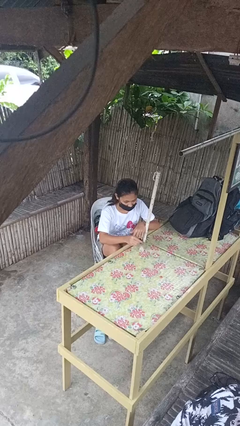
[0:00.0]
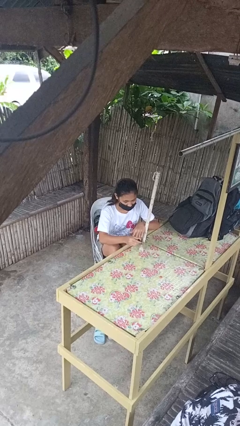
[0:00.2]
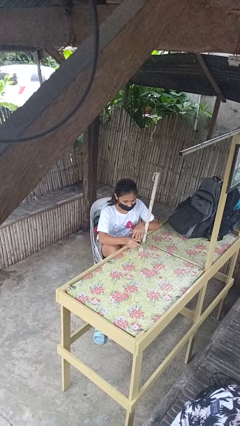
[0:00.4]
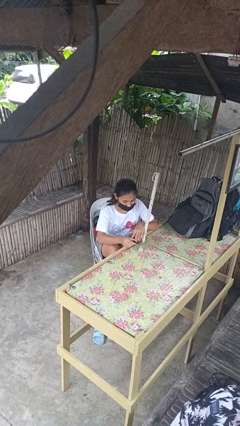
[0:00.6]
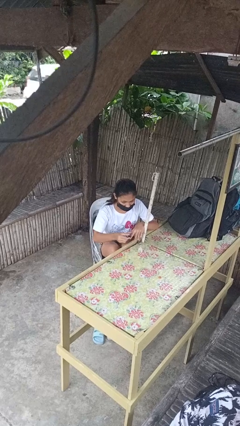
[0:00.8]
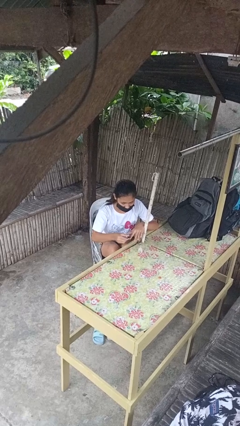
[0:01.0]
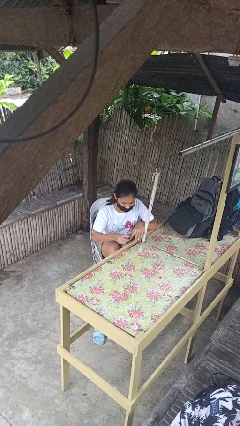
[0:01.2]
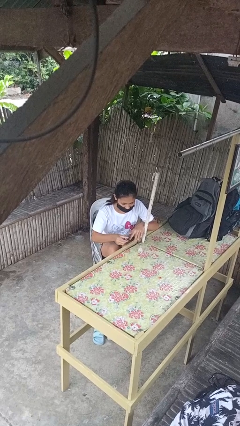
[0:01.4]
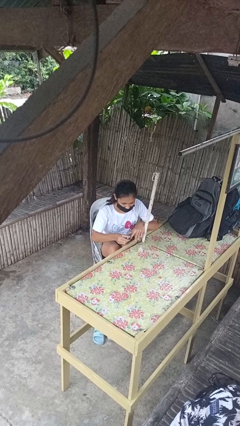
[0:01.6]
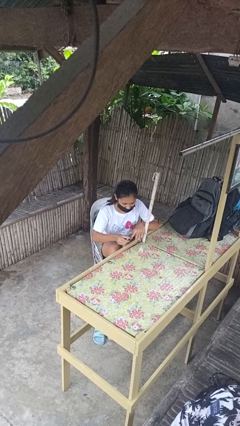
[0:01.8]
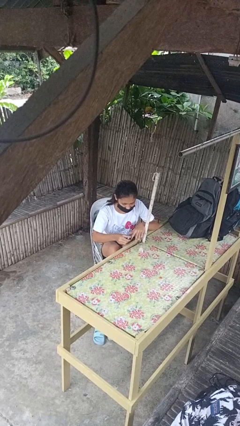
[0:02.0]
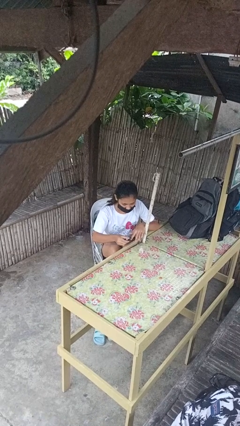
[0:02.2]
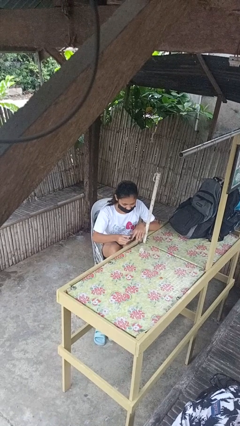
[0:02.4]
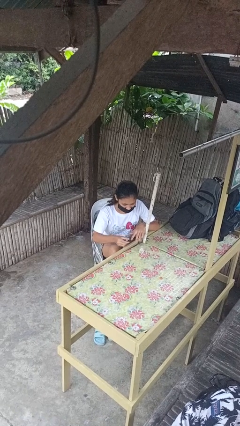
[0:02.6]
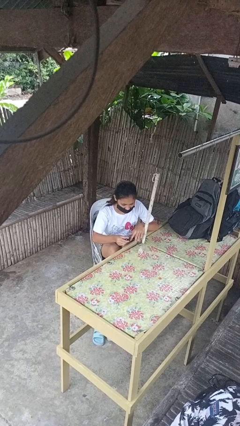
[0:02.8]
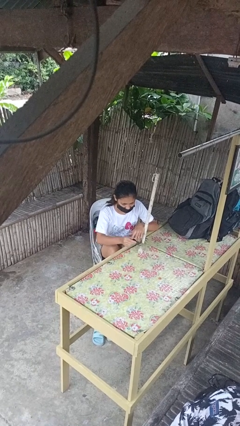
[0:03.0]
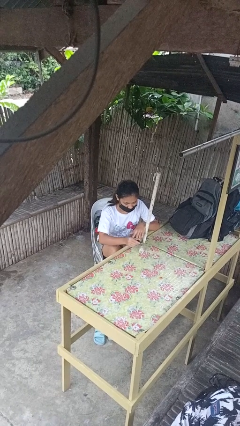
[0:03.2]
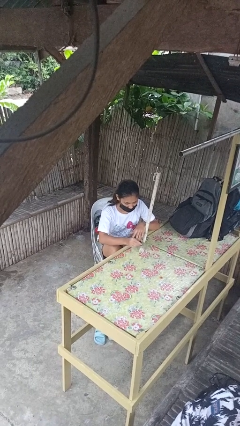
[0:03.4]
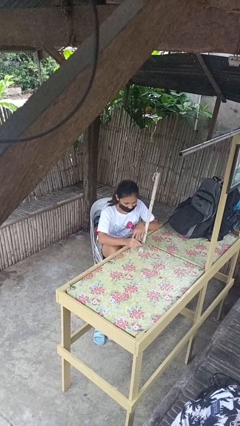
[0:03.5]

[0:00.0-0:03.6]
person paints fingernails

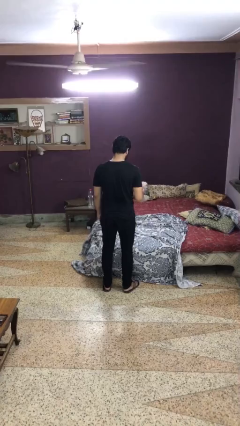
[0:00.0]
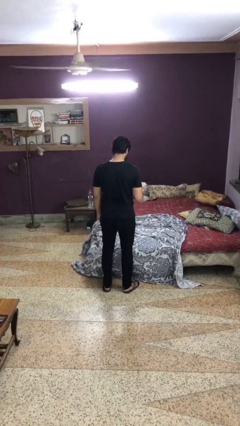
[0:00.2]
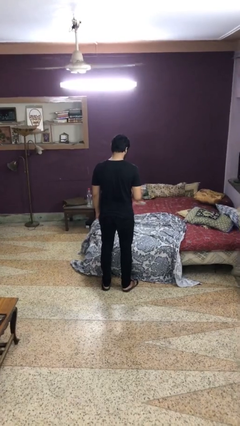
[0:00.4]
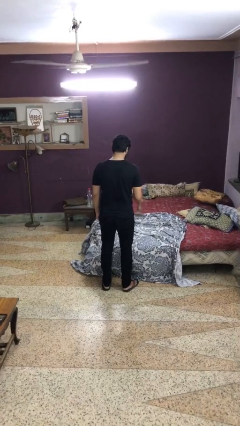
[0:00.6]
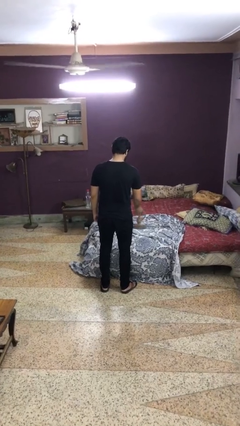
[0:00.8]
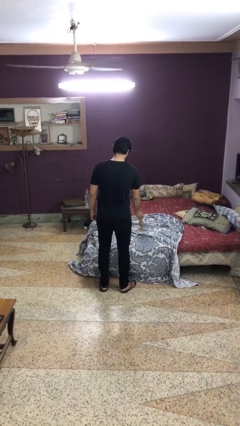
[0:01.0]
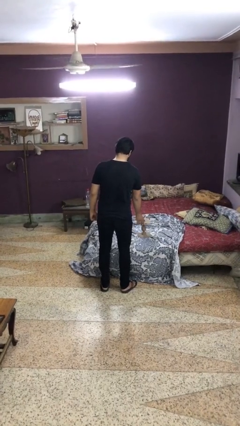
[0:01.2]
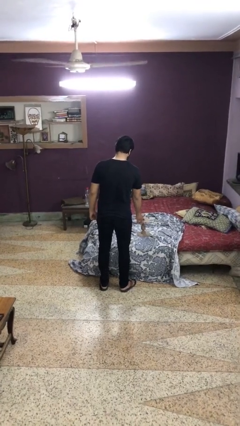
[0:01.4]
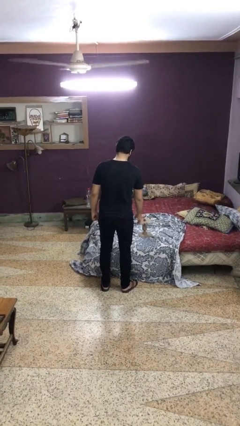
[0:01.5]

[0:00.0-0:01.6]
person puts down object on bed

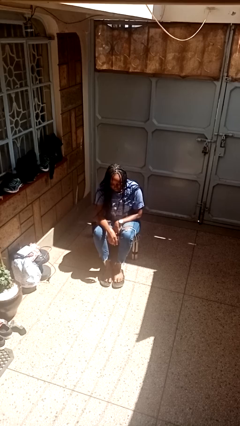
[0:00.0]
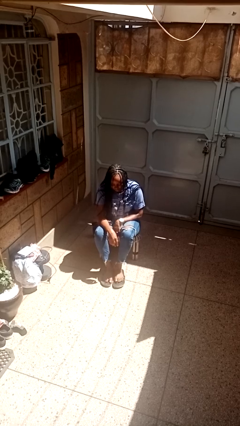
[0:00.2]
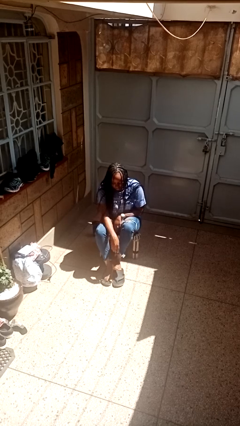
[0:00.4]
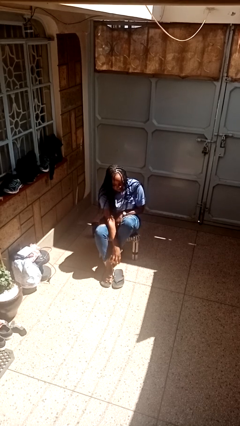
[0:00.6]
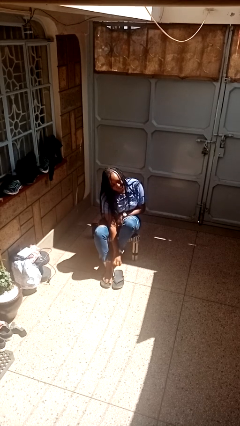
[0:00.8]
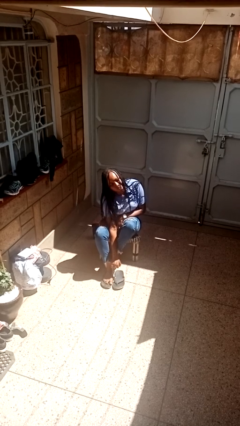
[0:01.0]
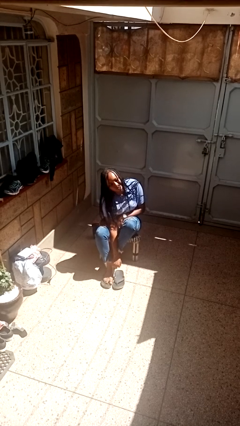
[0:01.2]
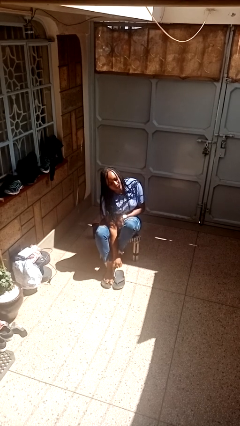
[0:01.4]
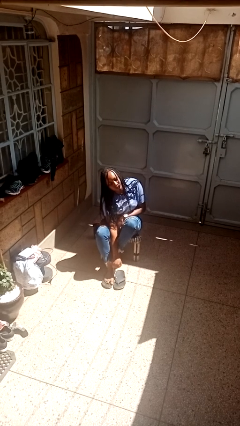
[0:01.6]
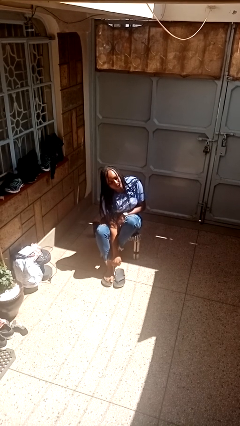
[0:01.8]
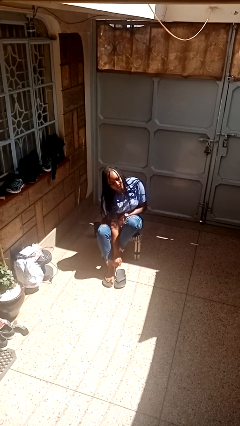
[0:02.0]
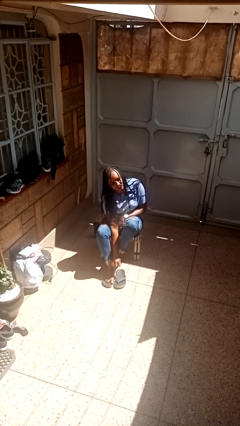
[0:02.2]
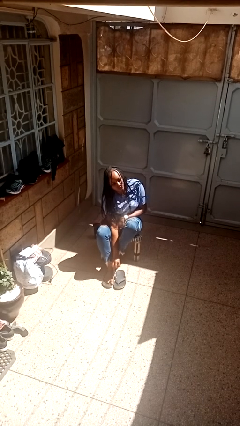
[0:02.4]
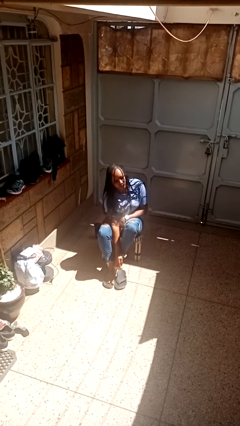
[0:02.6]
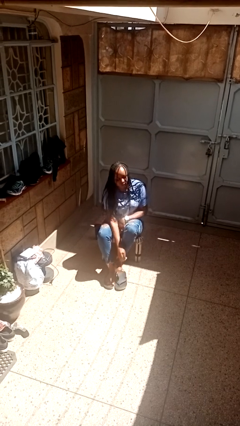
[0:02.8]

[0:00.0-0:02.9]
person rubs foot

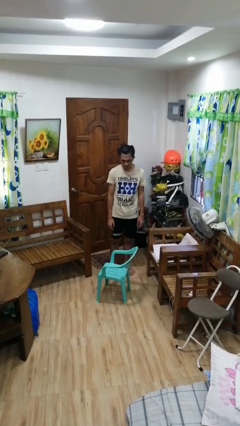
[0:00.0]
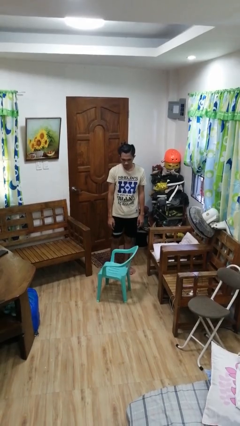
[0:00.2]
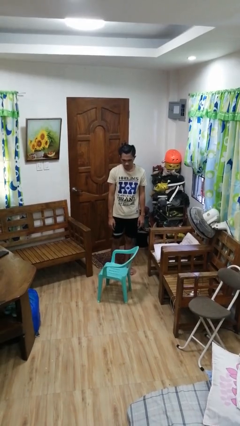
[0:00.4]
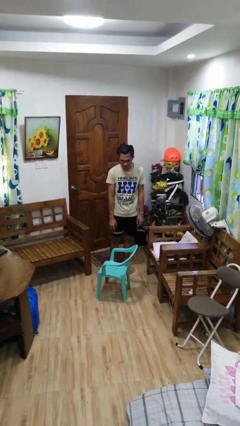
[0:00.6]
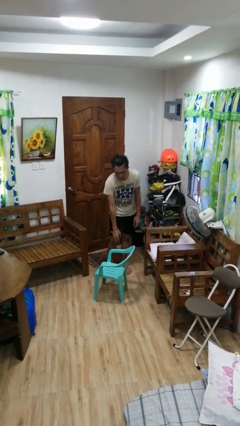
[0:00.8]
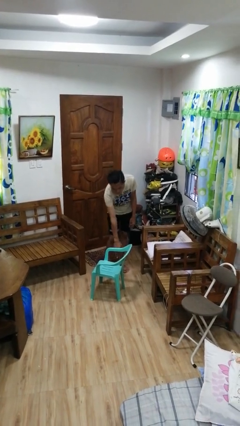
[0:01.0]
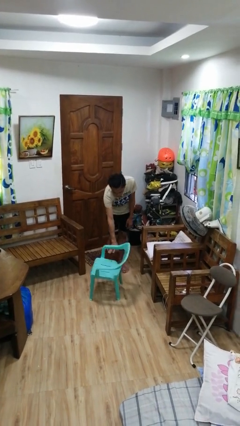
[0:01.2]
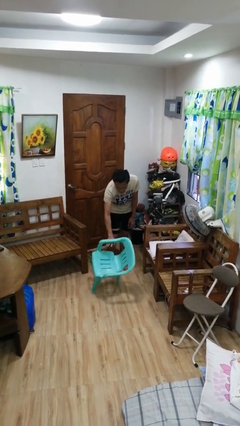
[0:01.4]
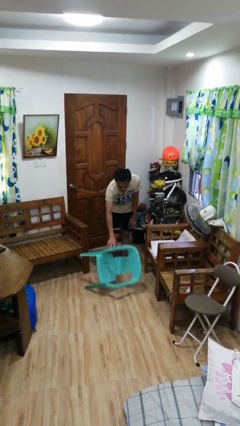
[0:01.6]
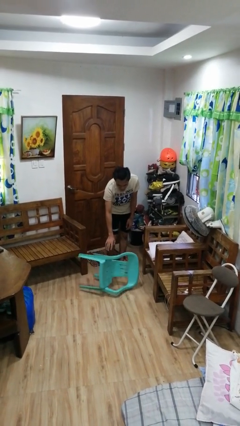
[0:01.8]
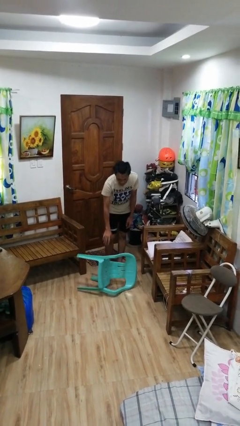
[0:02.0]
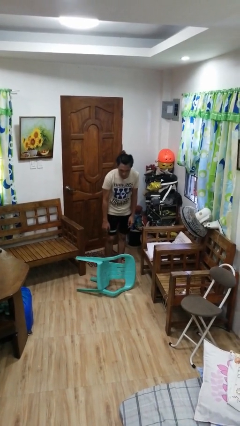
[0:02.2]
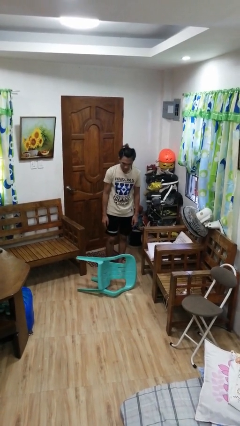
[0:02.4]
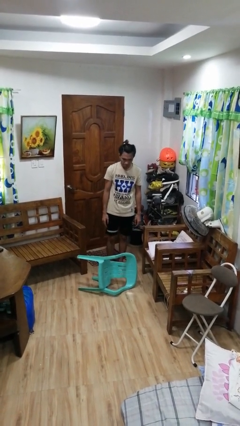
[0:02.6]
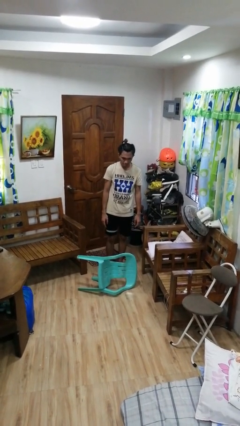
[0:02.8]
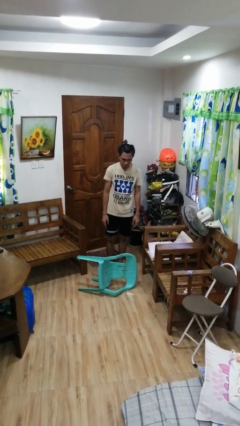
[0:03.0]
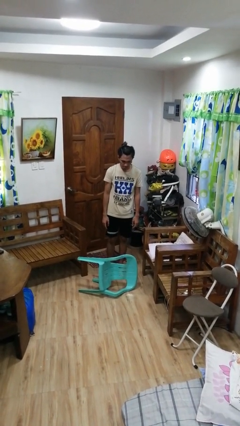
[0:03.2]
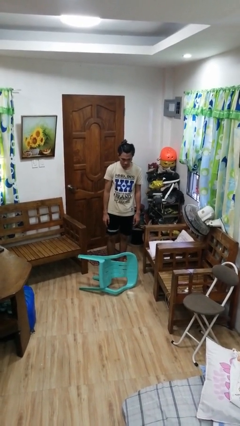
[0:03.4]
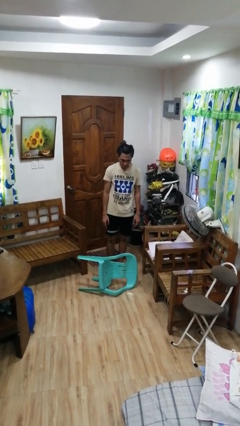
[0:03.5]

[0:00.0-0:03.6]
person knocks over furniture

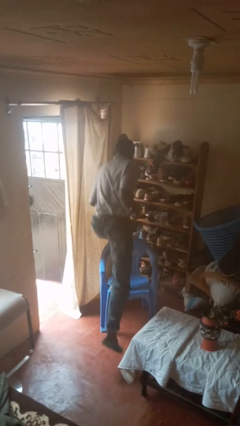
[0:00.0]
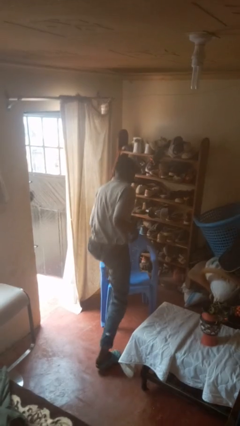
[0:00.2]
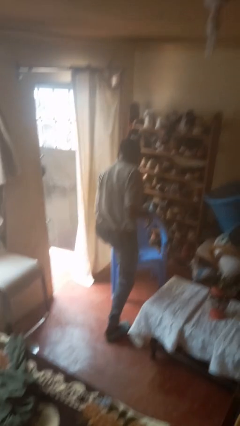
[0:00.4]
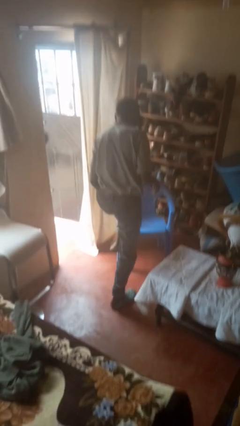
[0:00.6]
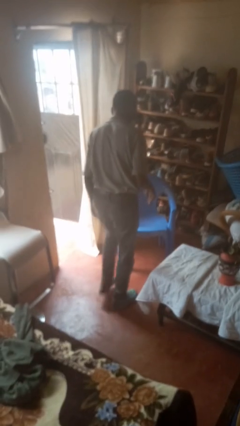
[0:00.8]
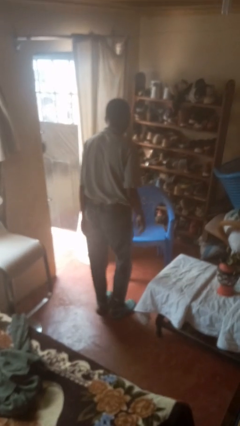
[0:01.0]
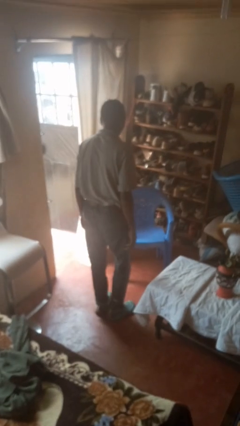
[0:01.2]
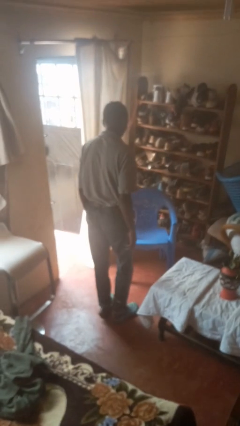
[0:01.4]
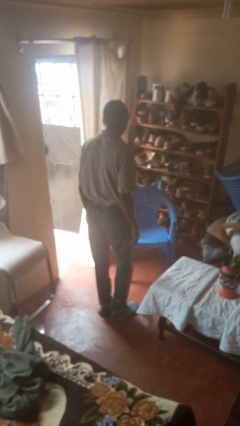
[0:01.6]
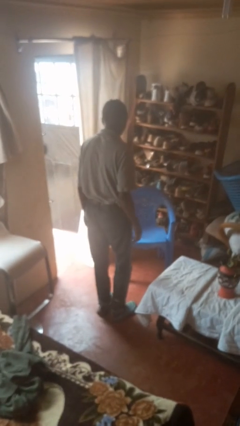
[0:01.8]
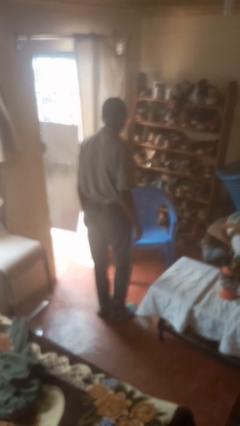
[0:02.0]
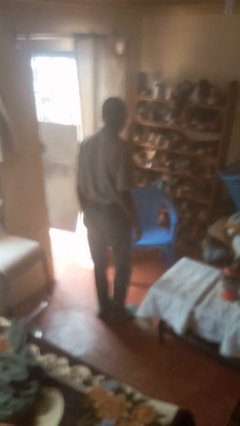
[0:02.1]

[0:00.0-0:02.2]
person climbs off chair

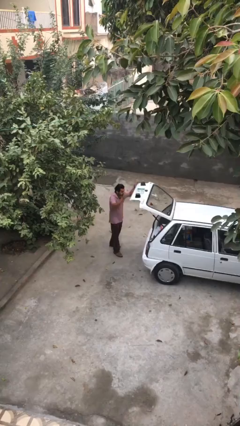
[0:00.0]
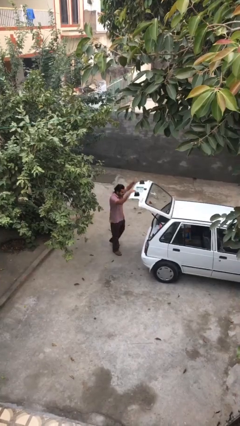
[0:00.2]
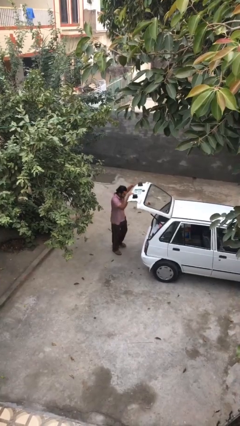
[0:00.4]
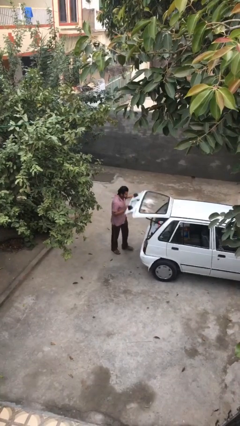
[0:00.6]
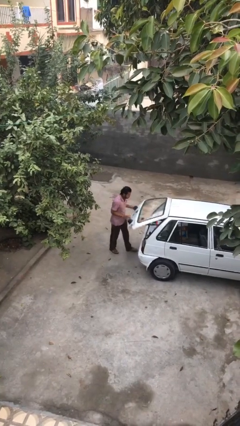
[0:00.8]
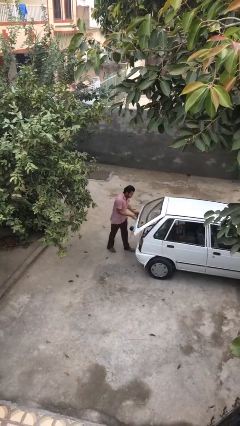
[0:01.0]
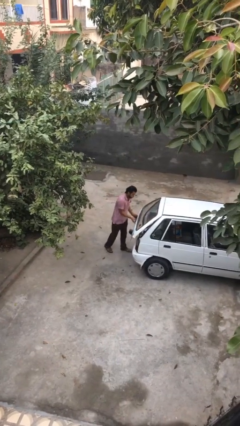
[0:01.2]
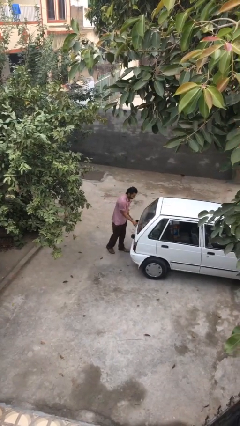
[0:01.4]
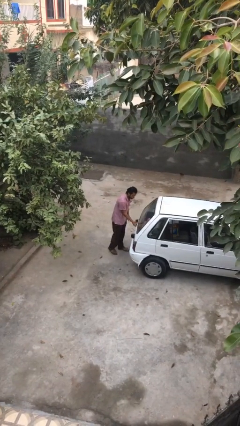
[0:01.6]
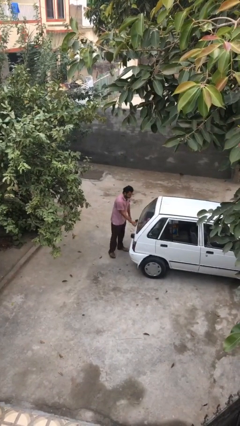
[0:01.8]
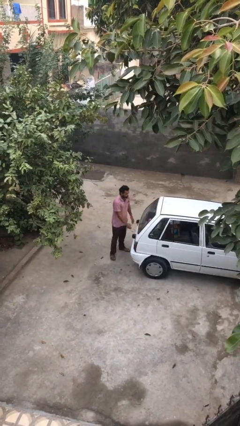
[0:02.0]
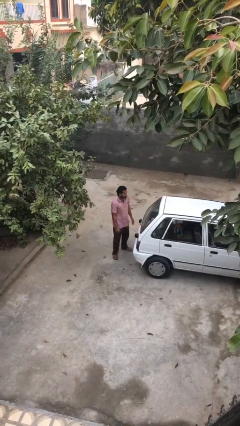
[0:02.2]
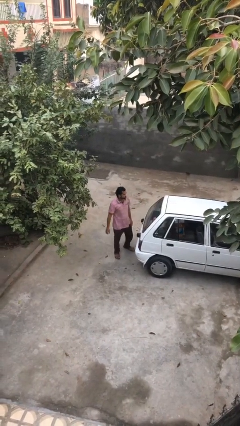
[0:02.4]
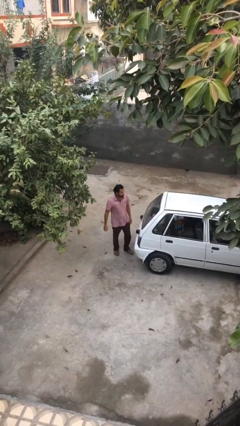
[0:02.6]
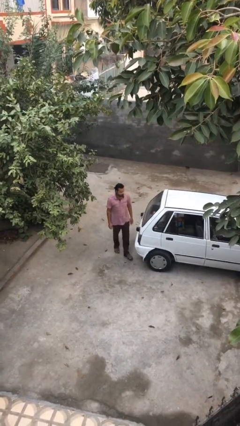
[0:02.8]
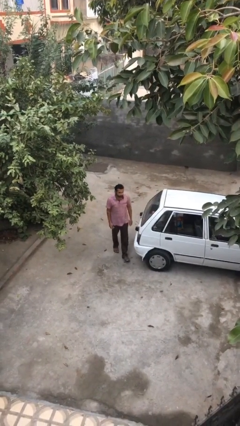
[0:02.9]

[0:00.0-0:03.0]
person closes car trunk

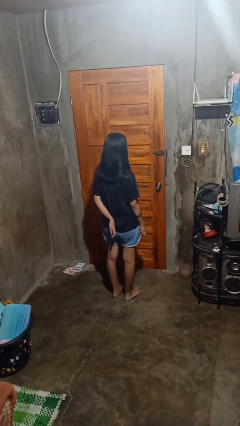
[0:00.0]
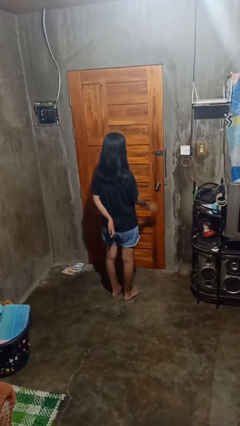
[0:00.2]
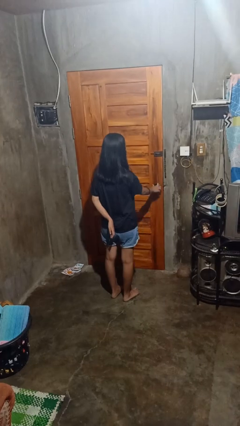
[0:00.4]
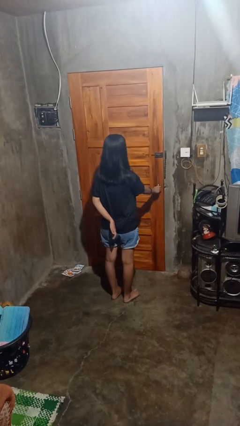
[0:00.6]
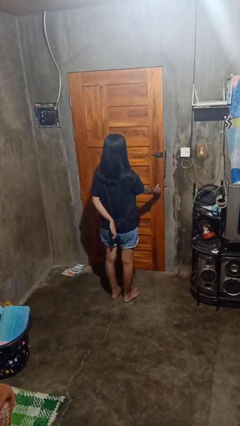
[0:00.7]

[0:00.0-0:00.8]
person opens facility door
